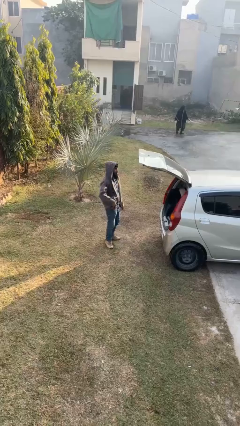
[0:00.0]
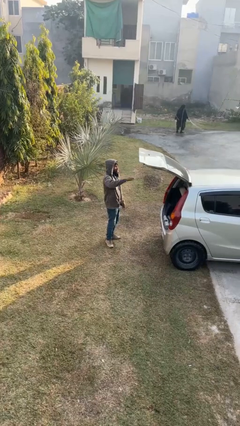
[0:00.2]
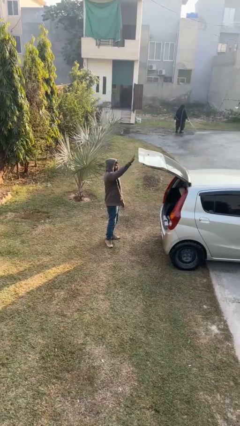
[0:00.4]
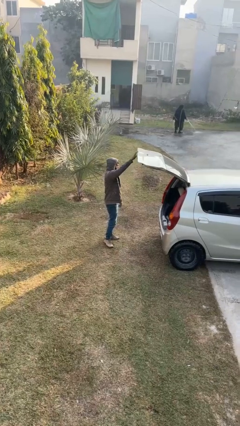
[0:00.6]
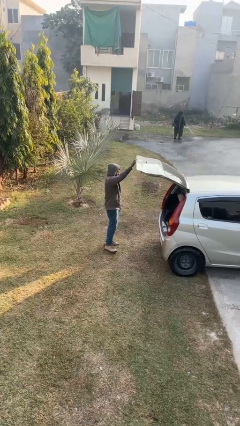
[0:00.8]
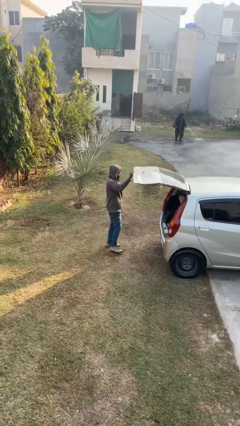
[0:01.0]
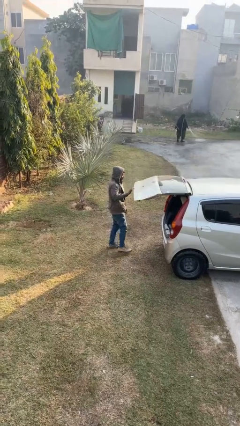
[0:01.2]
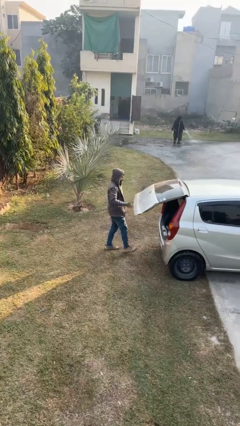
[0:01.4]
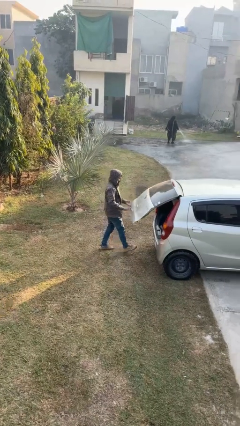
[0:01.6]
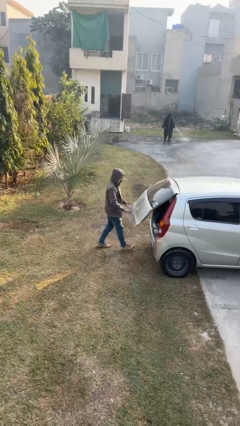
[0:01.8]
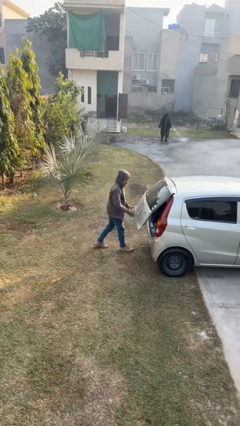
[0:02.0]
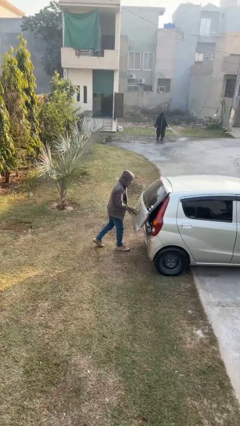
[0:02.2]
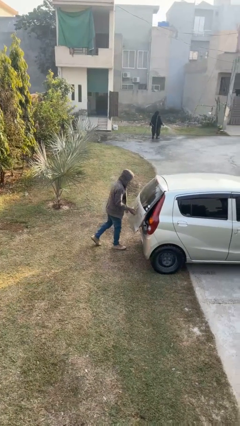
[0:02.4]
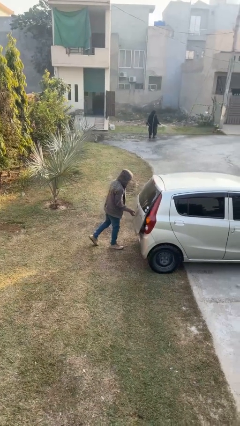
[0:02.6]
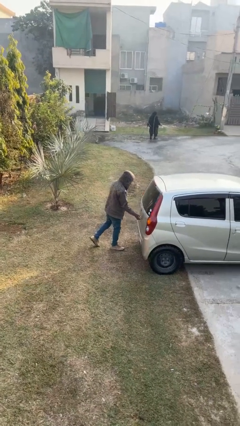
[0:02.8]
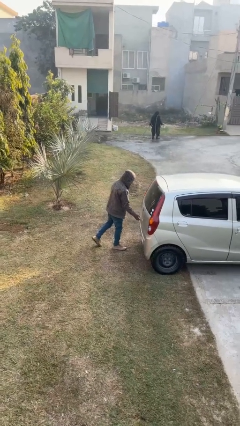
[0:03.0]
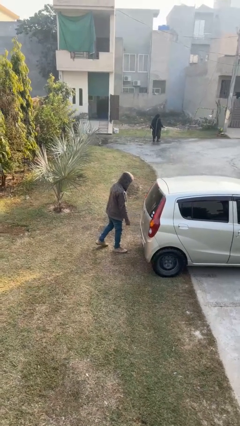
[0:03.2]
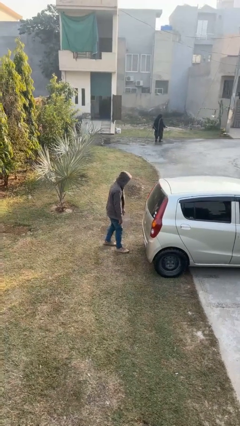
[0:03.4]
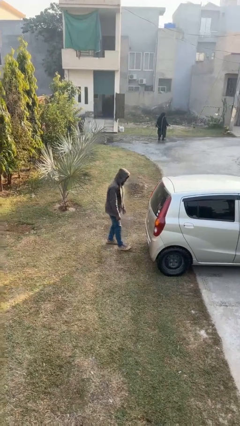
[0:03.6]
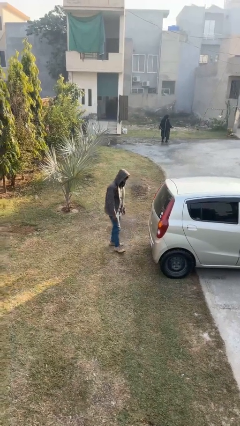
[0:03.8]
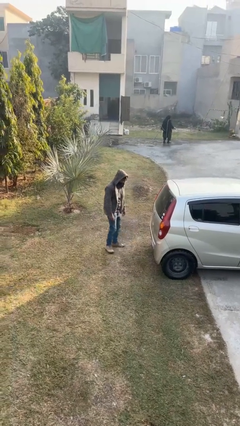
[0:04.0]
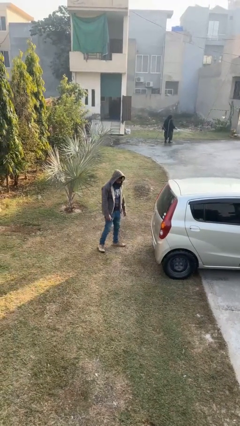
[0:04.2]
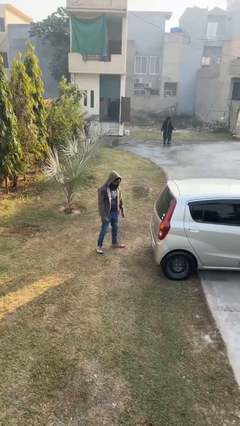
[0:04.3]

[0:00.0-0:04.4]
person closes car trunk

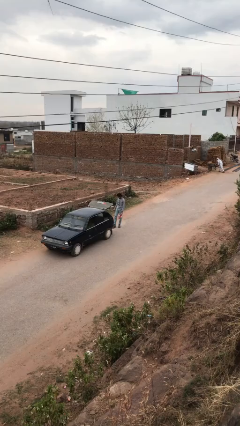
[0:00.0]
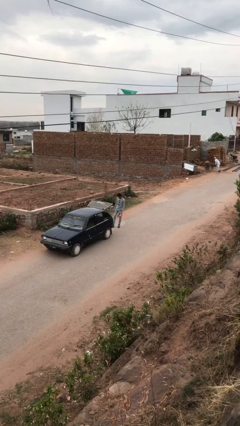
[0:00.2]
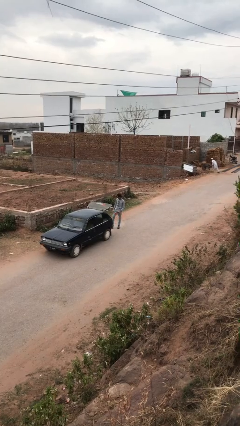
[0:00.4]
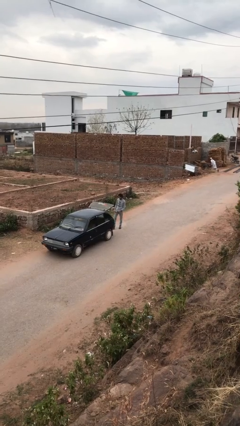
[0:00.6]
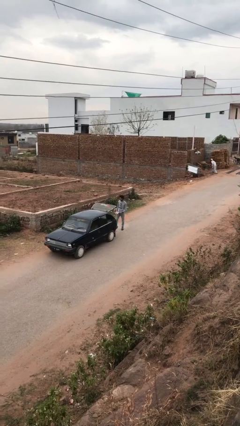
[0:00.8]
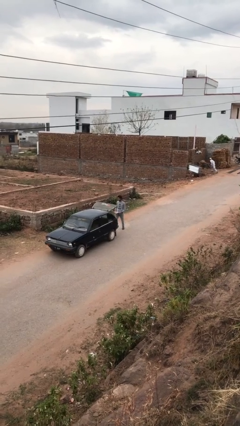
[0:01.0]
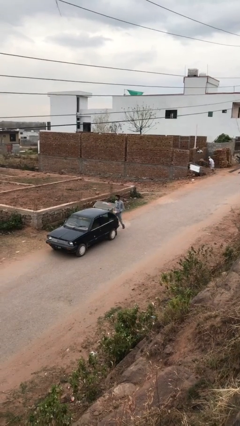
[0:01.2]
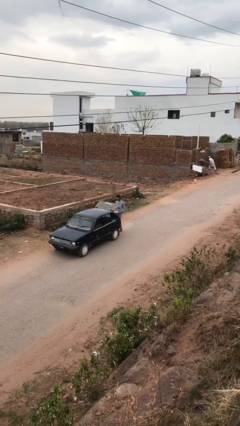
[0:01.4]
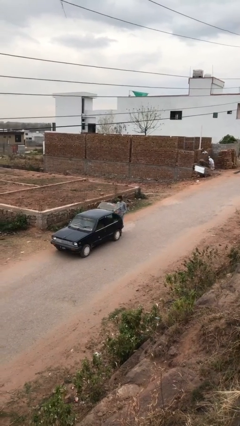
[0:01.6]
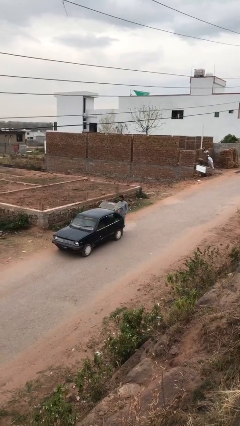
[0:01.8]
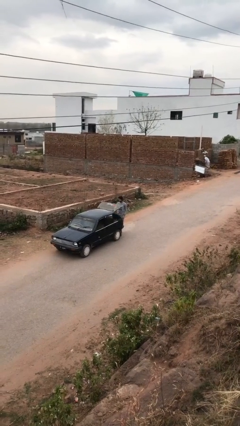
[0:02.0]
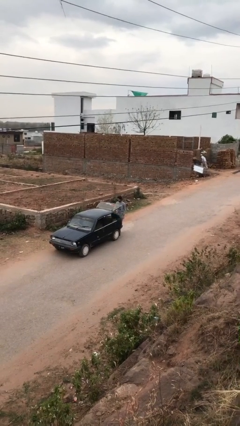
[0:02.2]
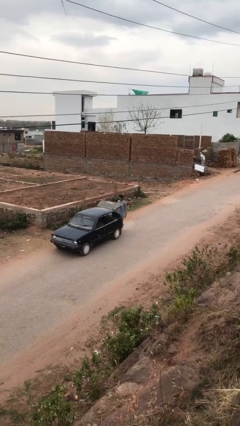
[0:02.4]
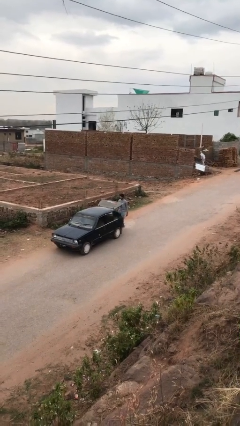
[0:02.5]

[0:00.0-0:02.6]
person loads car

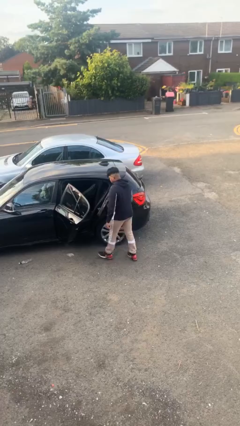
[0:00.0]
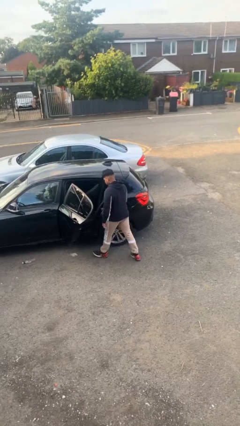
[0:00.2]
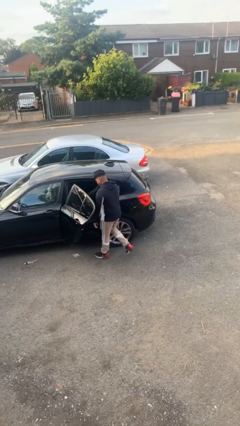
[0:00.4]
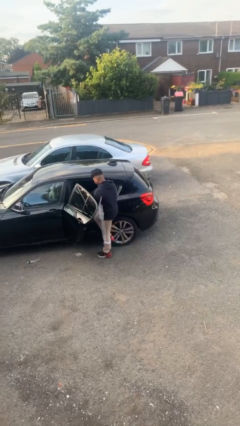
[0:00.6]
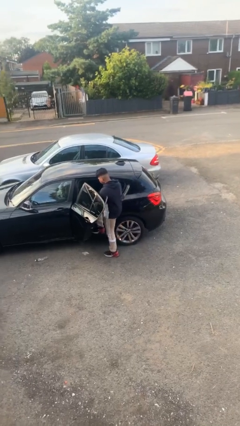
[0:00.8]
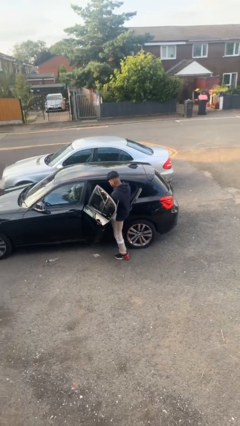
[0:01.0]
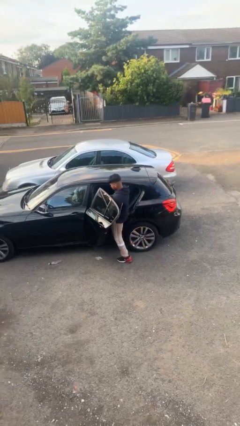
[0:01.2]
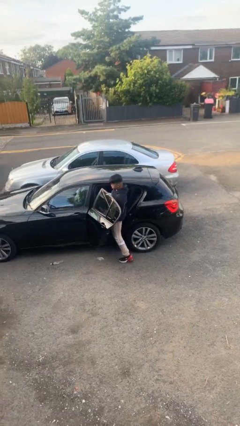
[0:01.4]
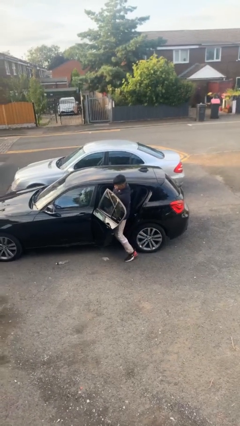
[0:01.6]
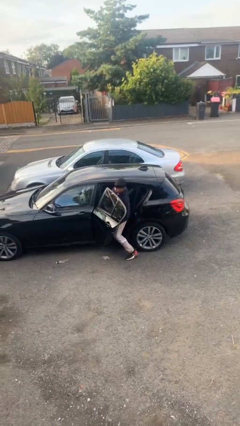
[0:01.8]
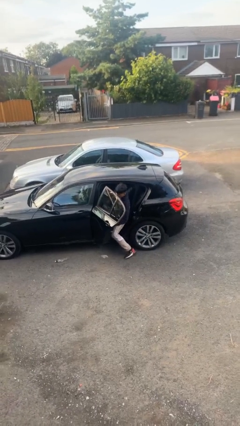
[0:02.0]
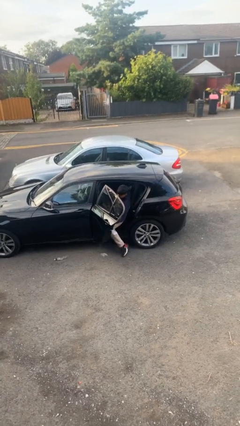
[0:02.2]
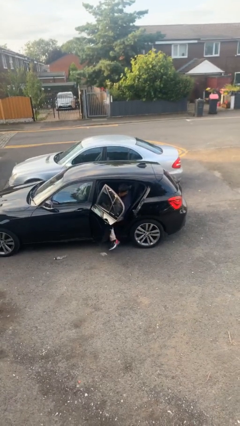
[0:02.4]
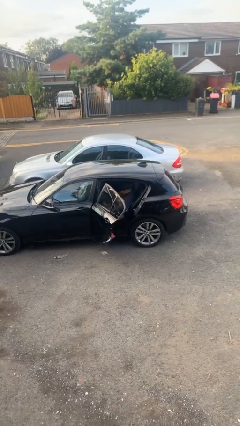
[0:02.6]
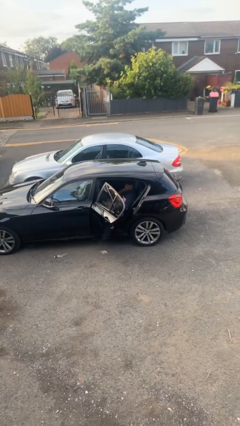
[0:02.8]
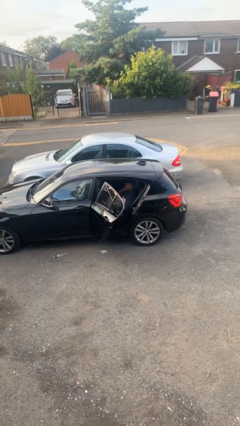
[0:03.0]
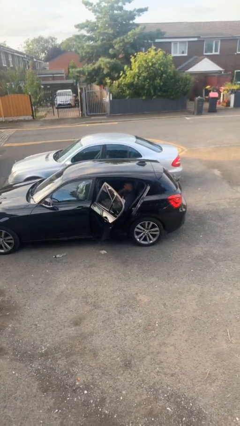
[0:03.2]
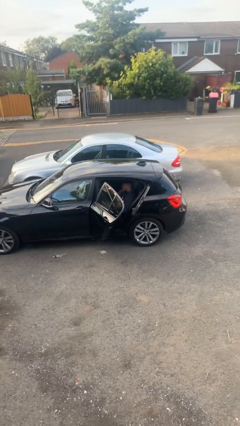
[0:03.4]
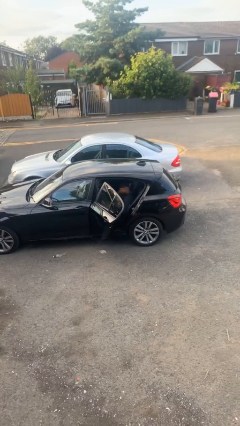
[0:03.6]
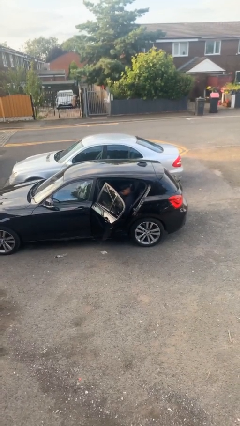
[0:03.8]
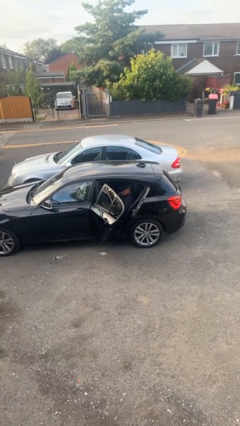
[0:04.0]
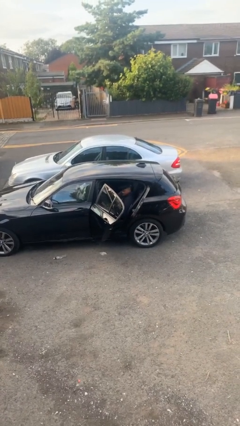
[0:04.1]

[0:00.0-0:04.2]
person enters car

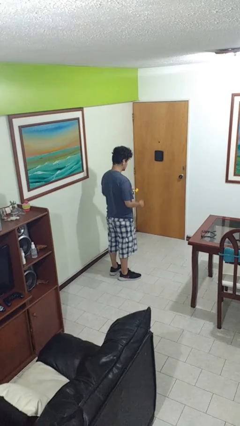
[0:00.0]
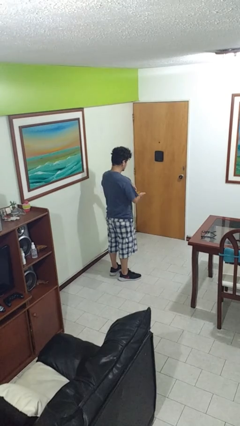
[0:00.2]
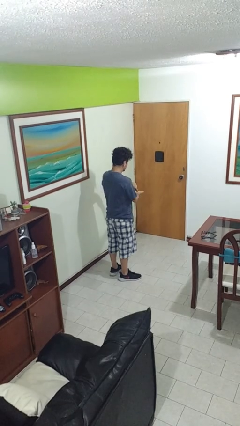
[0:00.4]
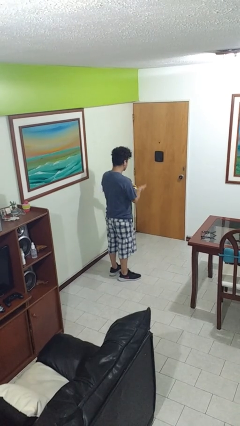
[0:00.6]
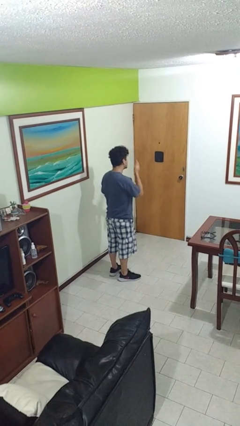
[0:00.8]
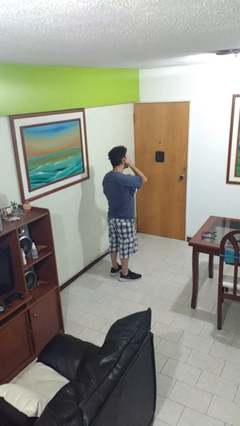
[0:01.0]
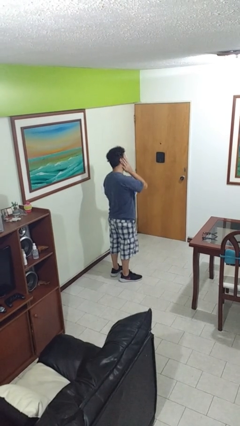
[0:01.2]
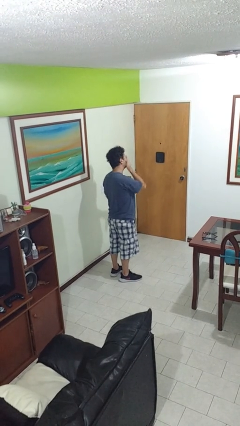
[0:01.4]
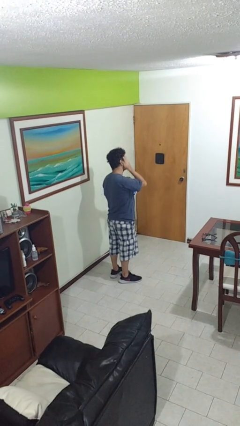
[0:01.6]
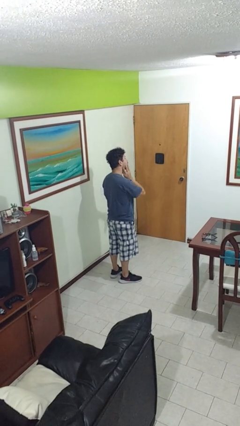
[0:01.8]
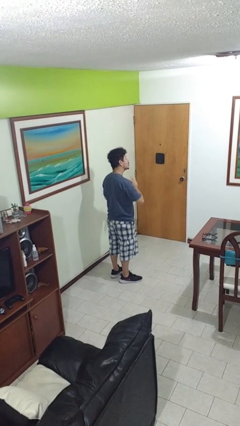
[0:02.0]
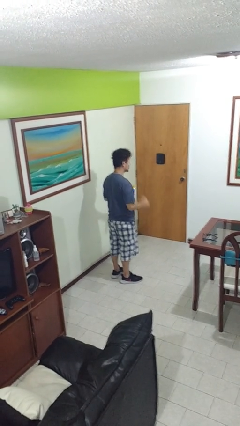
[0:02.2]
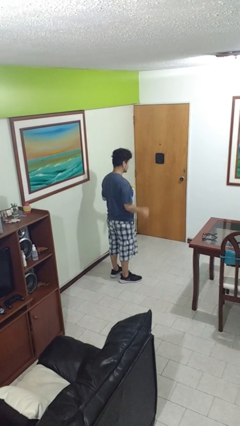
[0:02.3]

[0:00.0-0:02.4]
person applies sunscreen

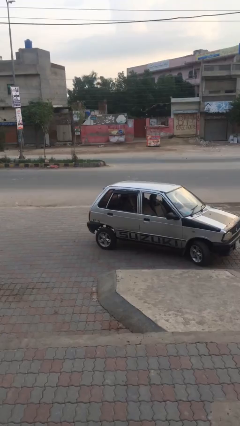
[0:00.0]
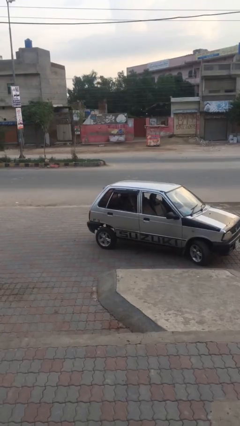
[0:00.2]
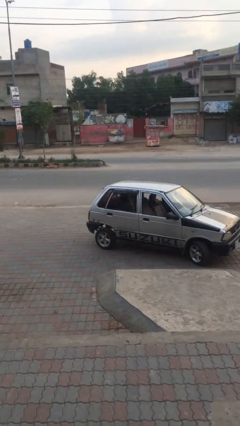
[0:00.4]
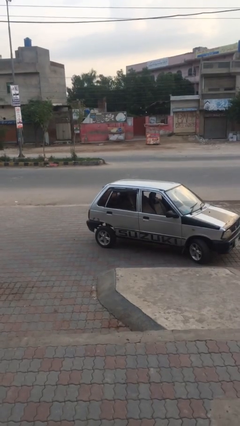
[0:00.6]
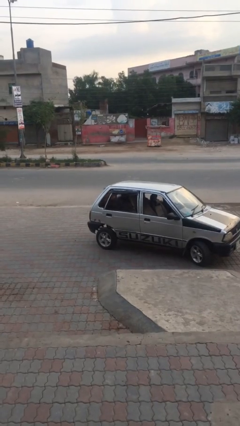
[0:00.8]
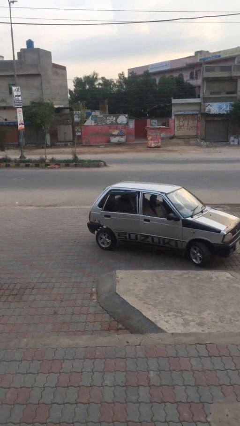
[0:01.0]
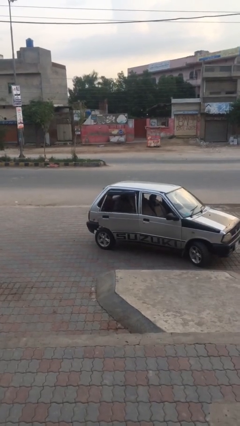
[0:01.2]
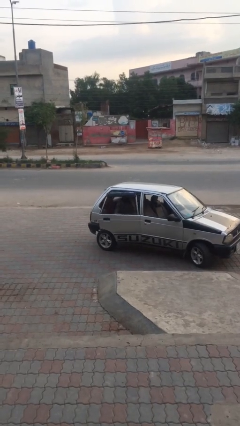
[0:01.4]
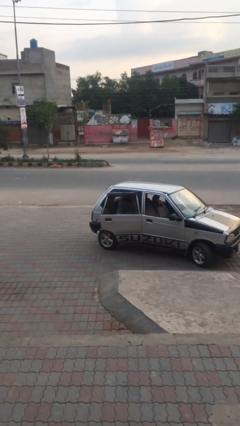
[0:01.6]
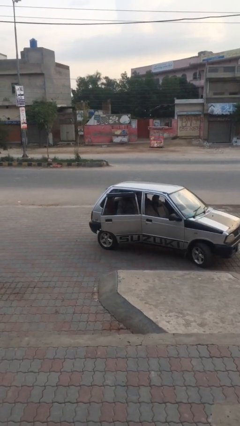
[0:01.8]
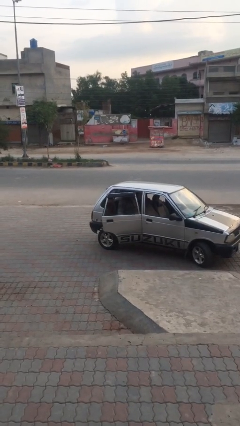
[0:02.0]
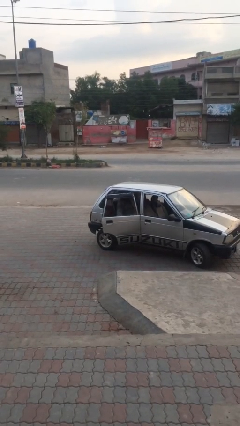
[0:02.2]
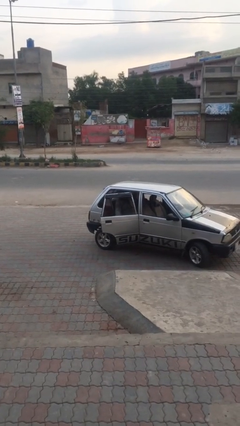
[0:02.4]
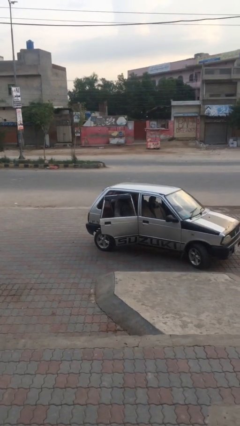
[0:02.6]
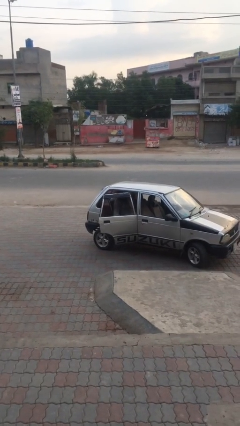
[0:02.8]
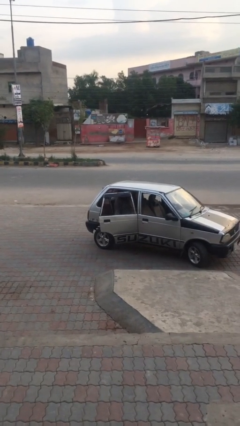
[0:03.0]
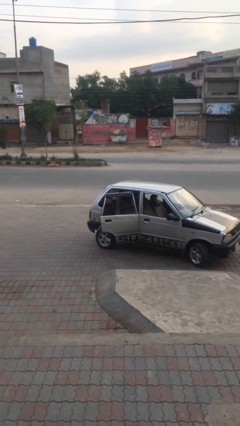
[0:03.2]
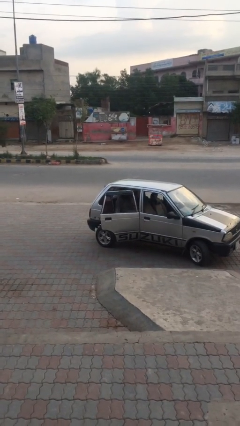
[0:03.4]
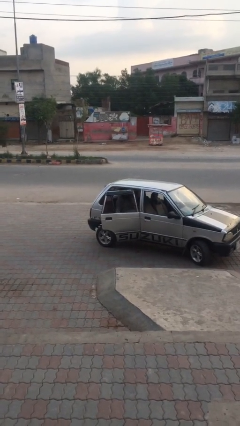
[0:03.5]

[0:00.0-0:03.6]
person opens car door

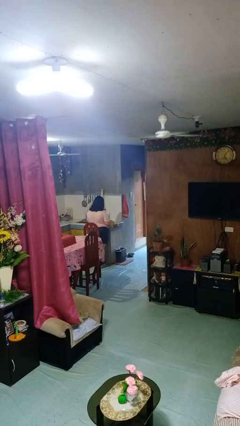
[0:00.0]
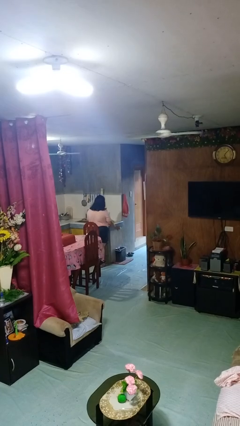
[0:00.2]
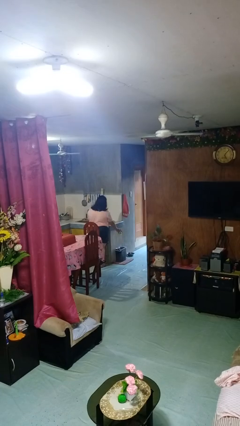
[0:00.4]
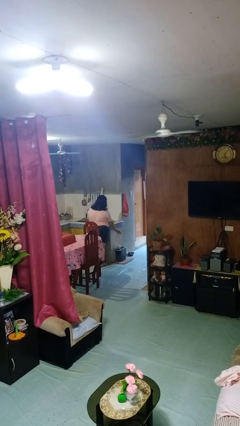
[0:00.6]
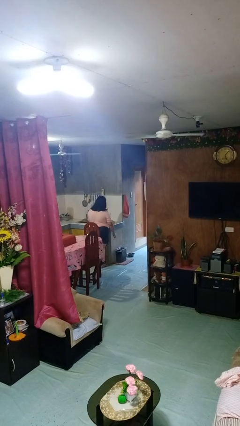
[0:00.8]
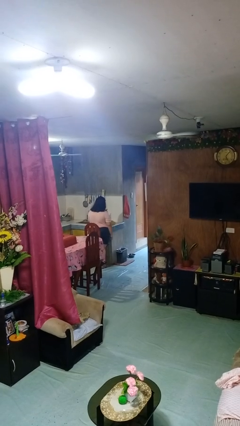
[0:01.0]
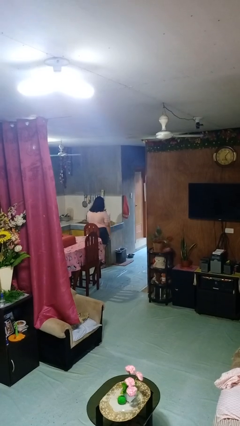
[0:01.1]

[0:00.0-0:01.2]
person discards trash
